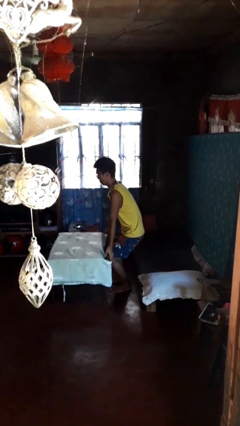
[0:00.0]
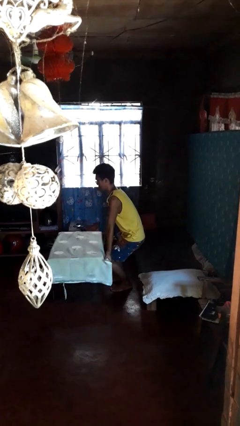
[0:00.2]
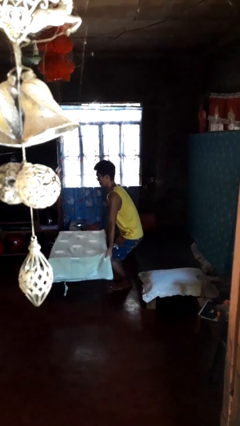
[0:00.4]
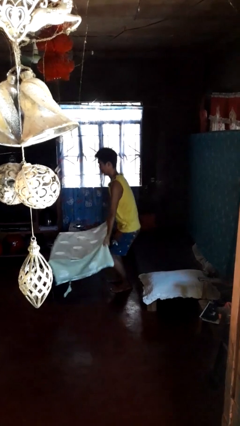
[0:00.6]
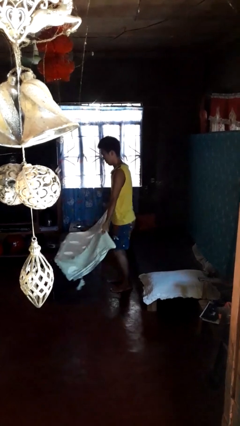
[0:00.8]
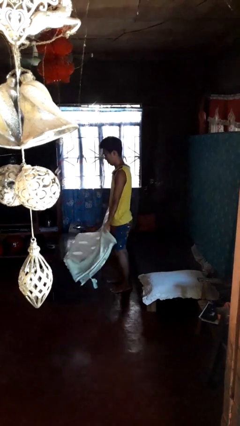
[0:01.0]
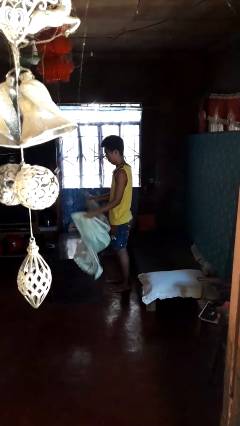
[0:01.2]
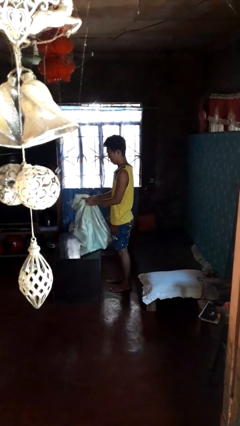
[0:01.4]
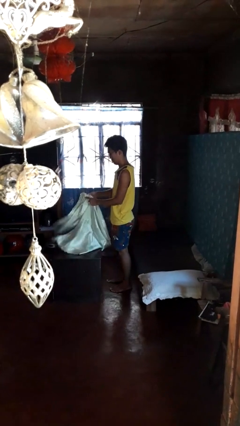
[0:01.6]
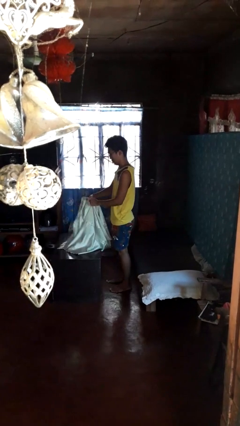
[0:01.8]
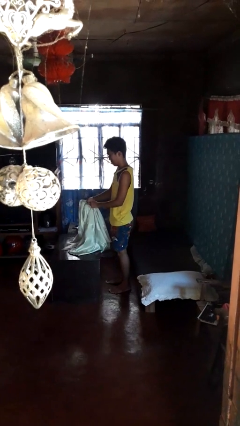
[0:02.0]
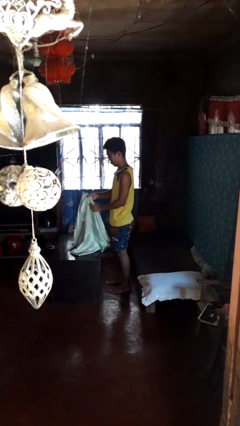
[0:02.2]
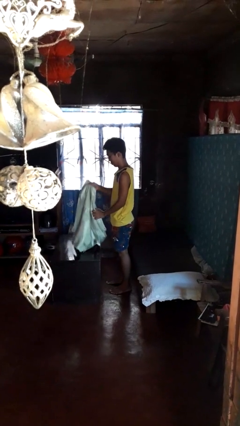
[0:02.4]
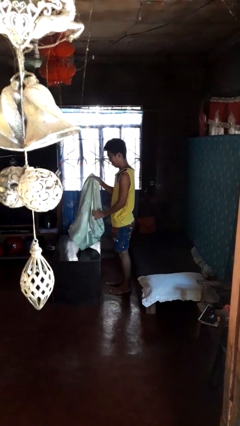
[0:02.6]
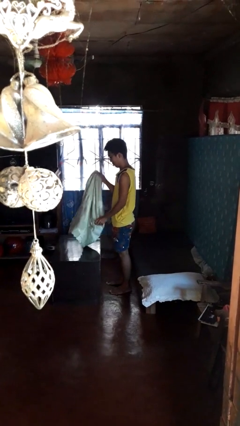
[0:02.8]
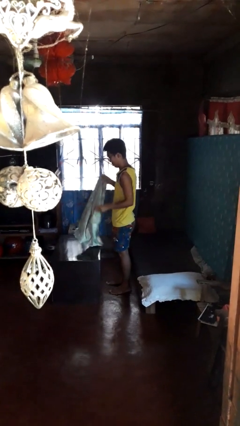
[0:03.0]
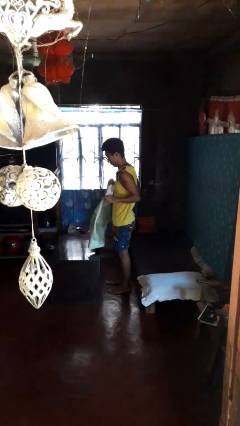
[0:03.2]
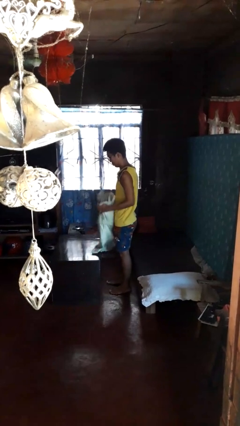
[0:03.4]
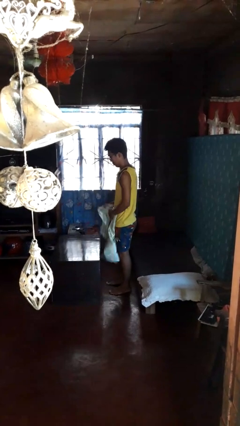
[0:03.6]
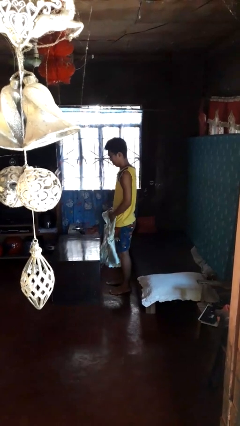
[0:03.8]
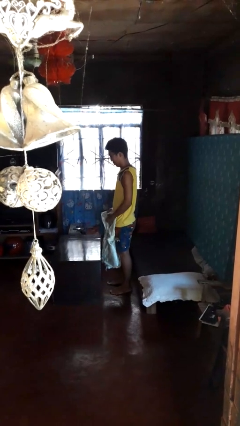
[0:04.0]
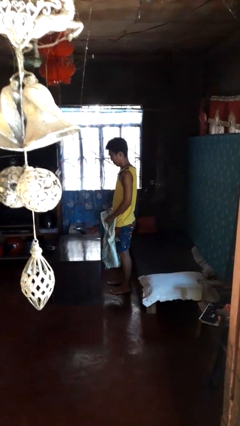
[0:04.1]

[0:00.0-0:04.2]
person folds tablecloth

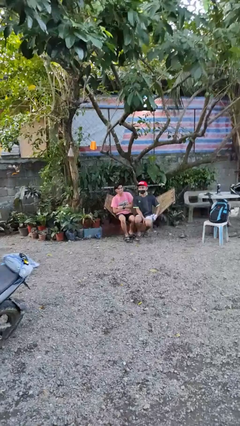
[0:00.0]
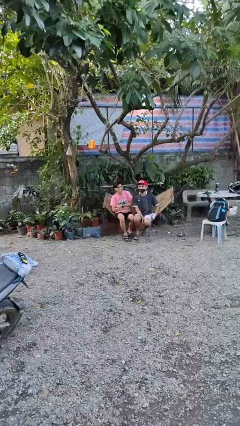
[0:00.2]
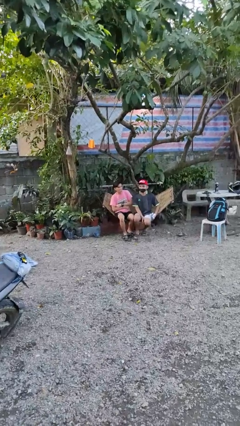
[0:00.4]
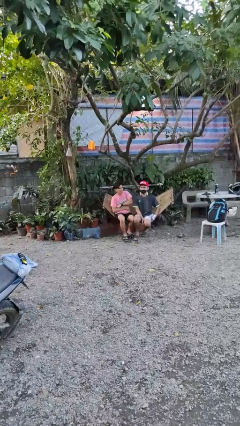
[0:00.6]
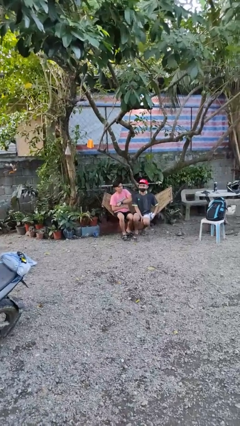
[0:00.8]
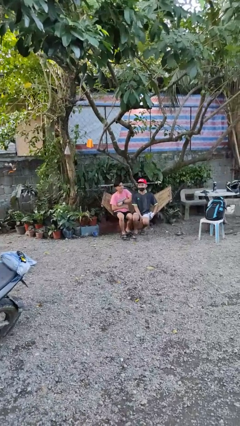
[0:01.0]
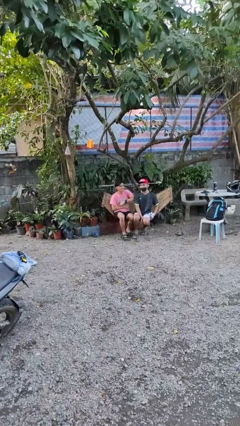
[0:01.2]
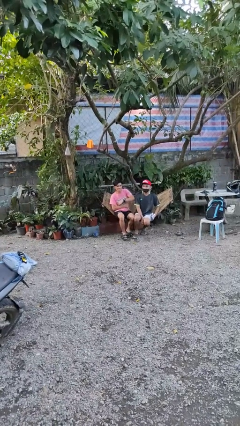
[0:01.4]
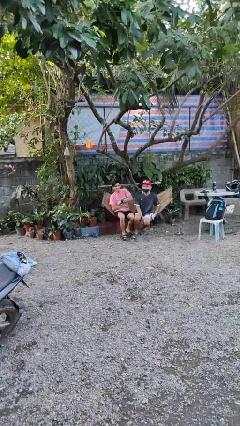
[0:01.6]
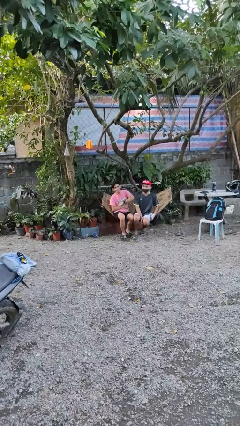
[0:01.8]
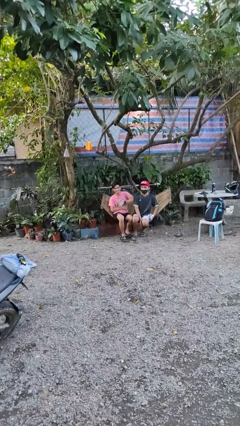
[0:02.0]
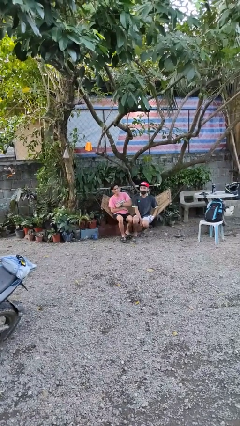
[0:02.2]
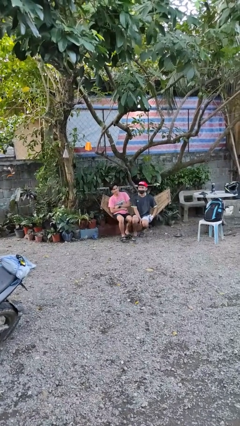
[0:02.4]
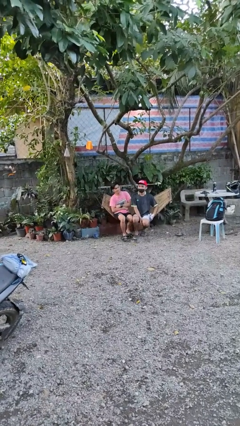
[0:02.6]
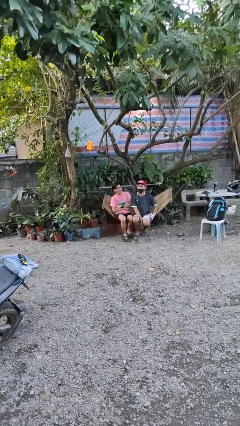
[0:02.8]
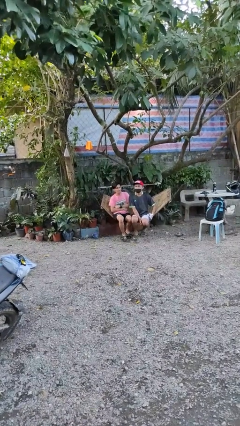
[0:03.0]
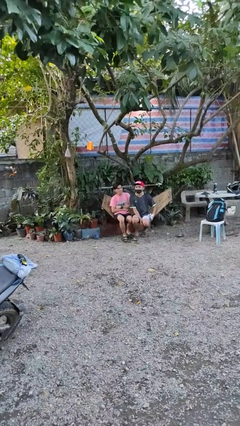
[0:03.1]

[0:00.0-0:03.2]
person nudges person with elbow

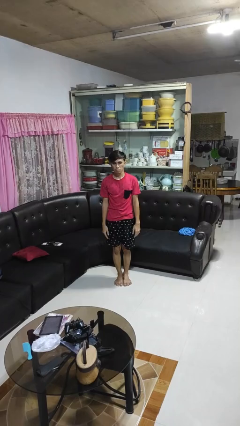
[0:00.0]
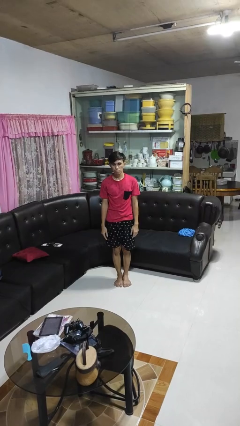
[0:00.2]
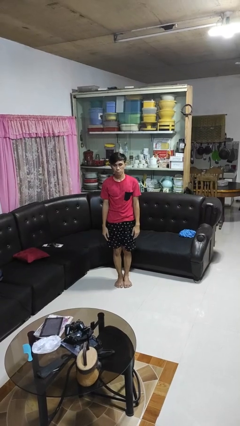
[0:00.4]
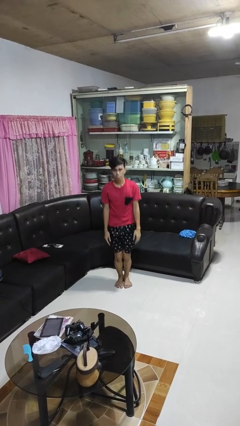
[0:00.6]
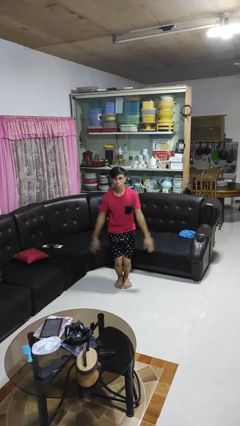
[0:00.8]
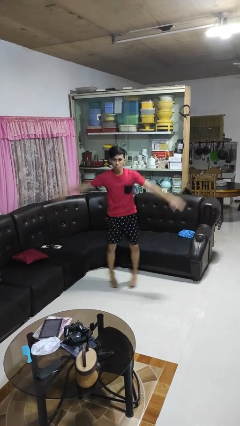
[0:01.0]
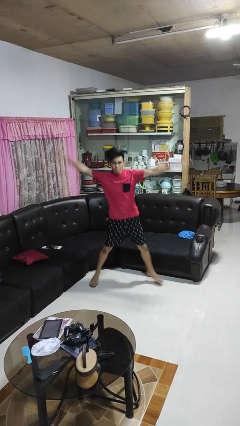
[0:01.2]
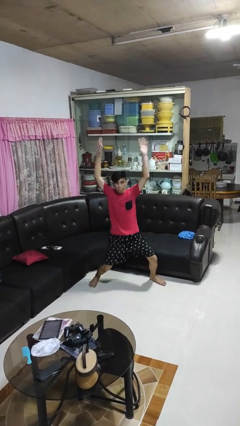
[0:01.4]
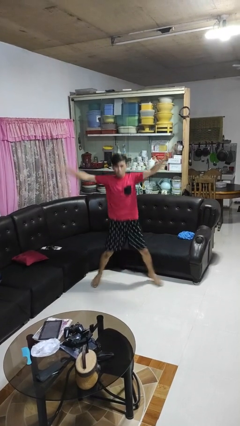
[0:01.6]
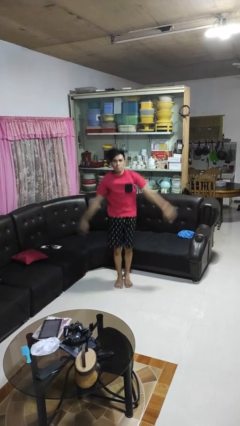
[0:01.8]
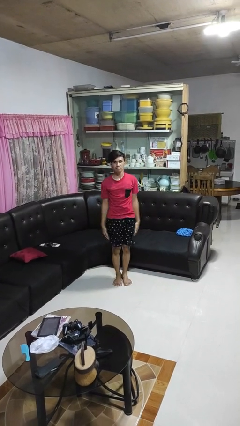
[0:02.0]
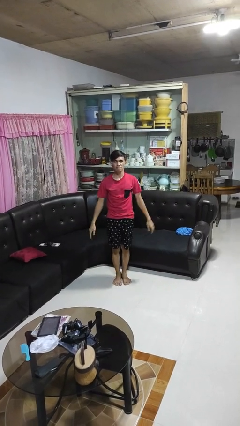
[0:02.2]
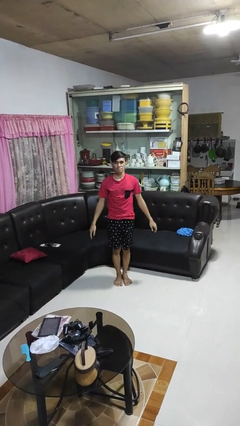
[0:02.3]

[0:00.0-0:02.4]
person exercises with jumping jacks

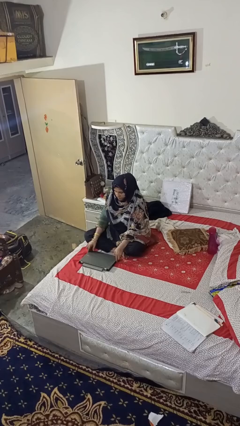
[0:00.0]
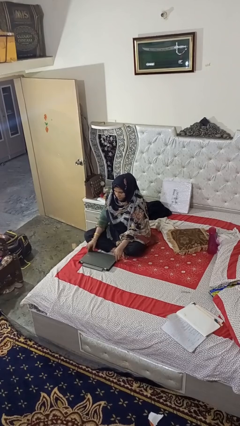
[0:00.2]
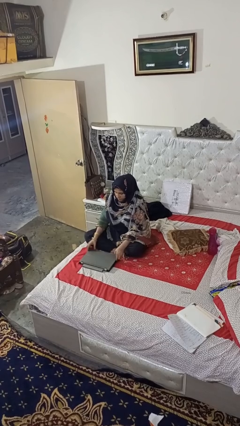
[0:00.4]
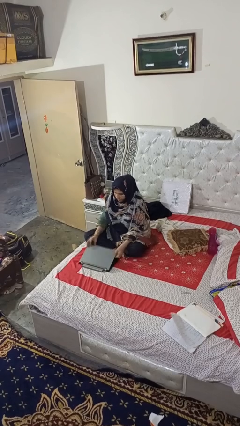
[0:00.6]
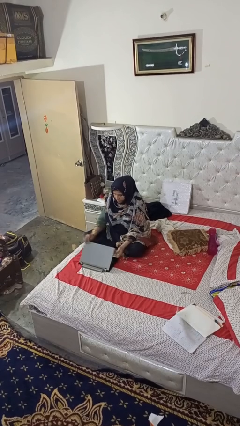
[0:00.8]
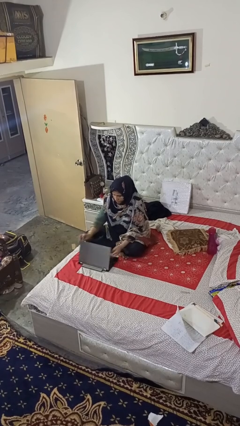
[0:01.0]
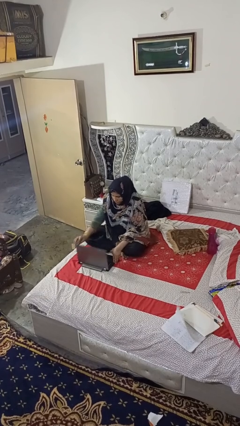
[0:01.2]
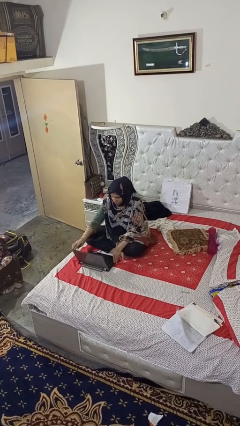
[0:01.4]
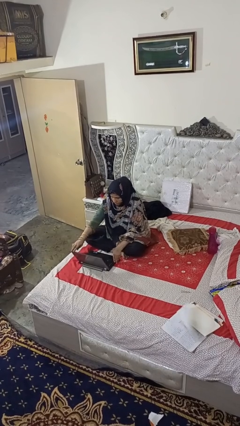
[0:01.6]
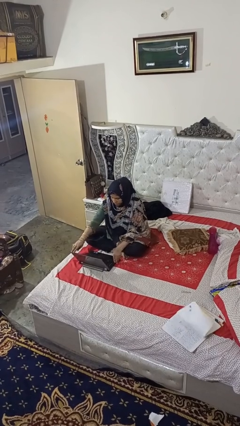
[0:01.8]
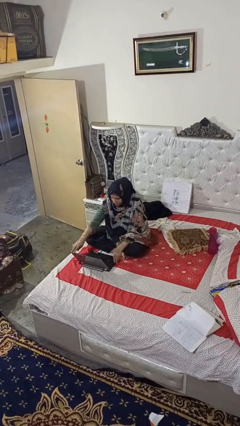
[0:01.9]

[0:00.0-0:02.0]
person opens laptop

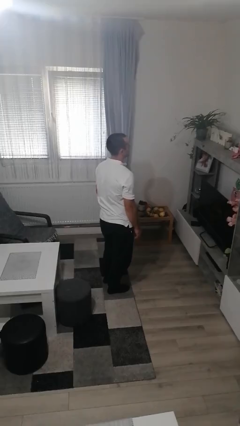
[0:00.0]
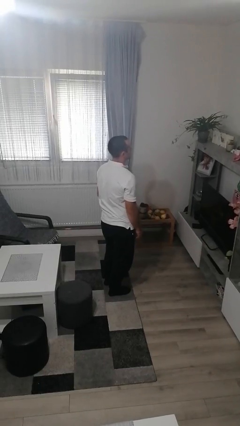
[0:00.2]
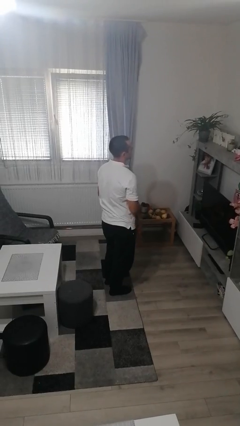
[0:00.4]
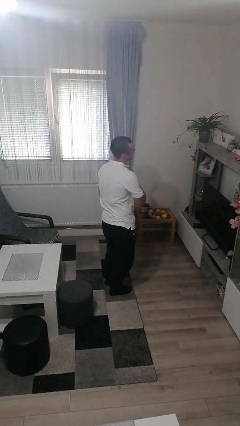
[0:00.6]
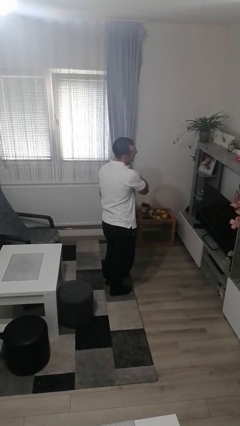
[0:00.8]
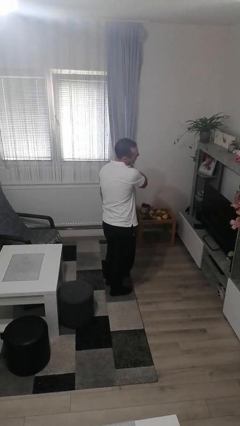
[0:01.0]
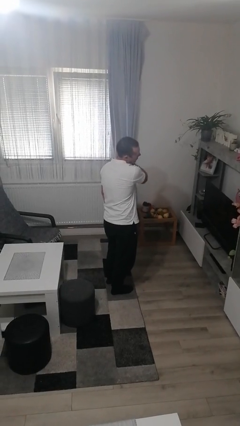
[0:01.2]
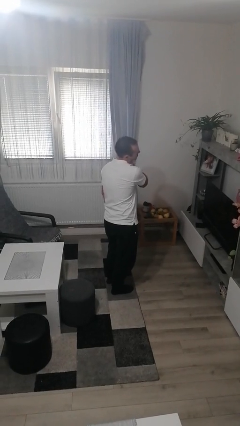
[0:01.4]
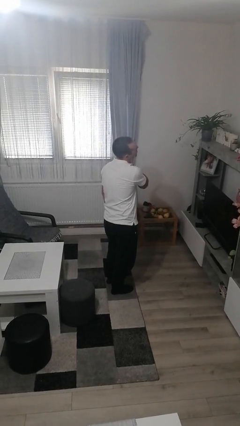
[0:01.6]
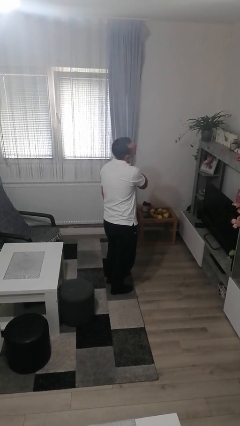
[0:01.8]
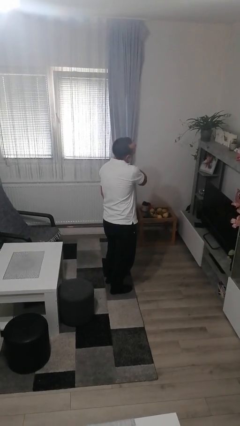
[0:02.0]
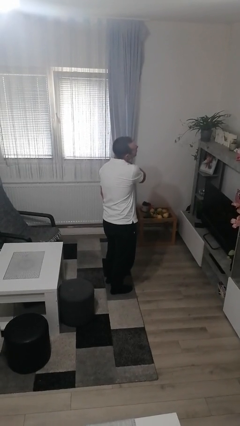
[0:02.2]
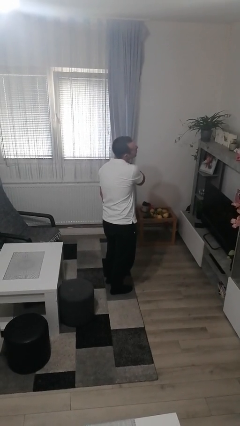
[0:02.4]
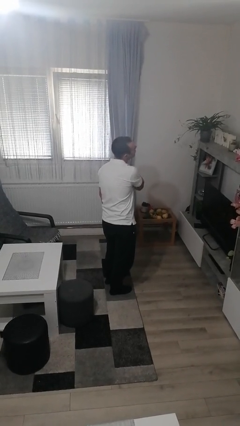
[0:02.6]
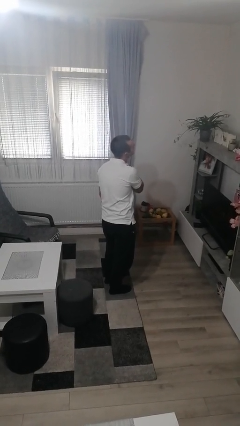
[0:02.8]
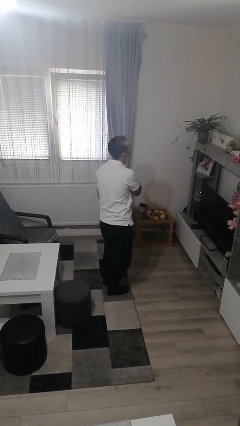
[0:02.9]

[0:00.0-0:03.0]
person rubs neck

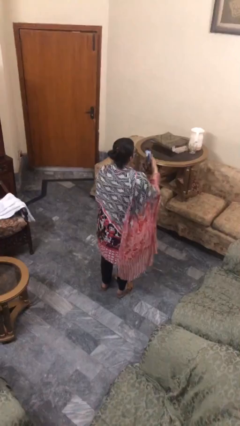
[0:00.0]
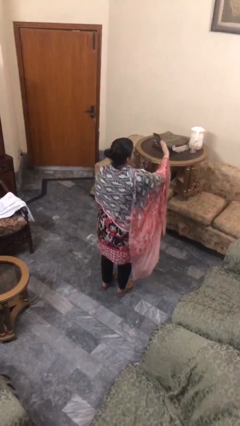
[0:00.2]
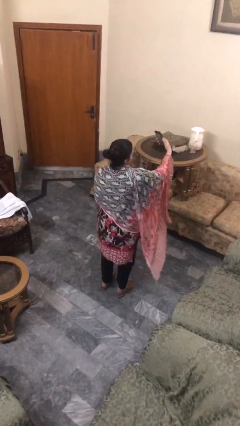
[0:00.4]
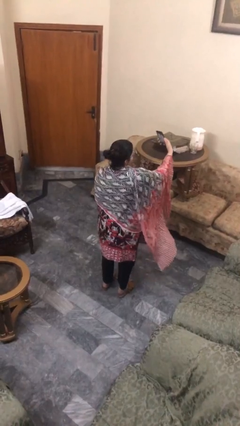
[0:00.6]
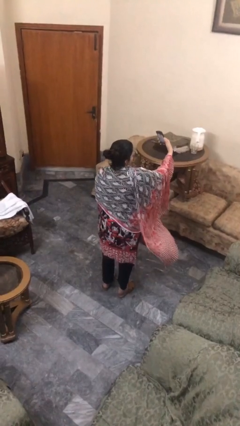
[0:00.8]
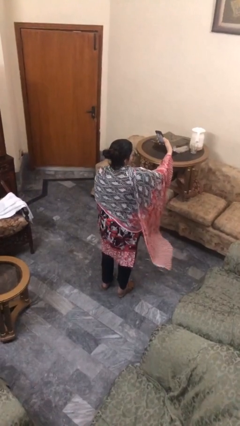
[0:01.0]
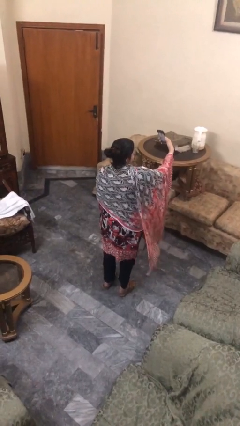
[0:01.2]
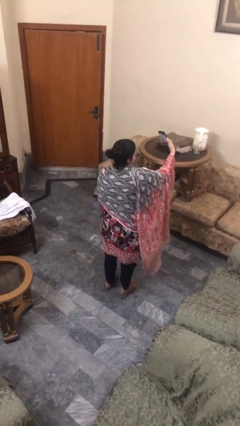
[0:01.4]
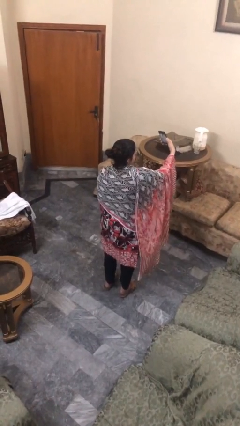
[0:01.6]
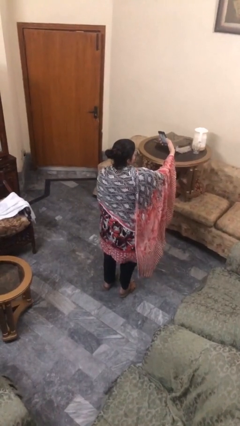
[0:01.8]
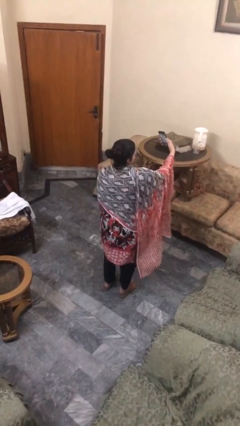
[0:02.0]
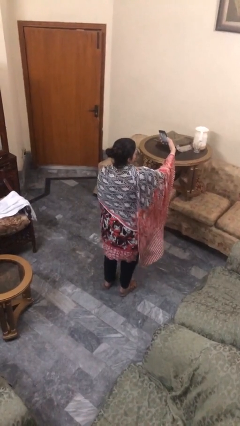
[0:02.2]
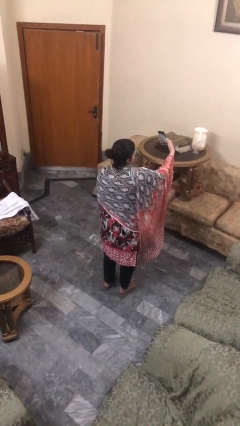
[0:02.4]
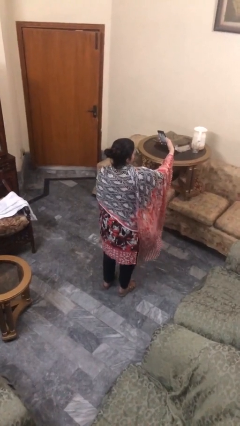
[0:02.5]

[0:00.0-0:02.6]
person takes selfie
